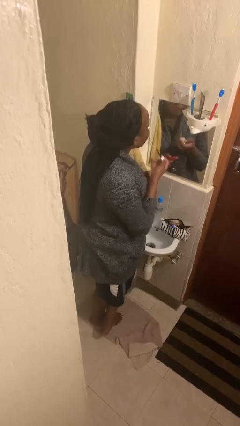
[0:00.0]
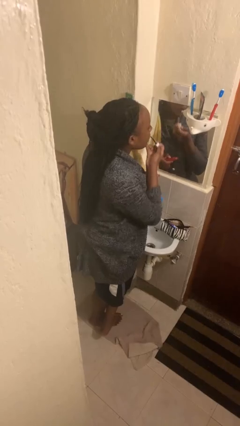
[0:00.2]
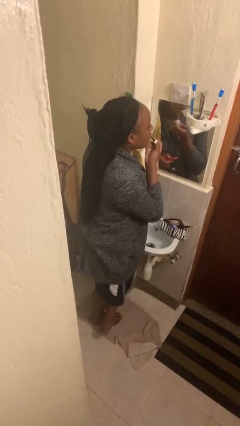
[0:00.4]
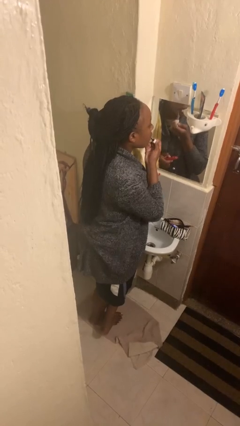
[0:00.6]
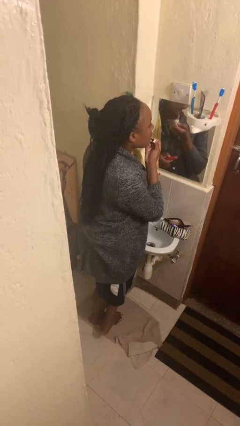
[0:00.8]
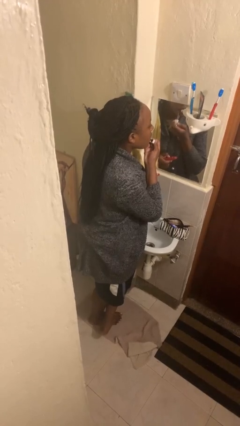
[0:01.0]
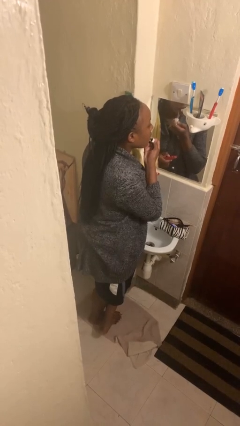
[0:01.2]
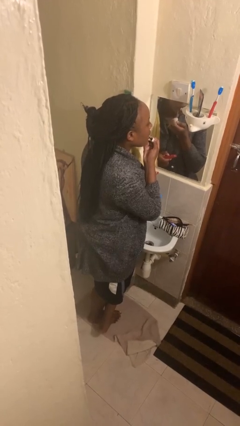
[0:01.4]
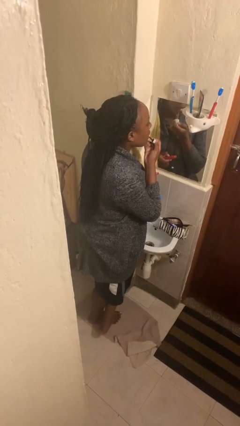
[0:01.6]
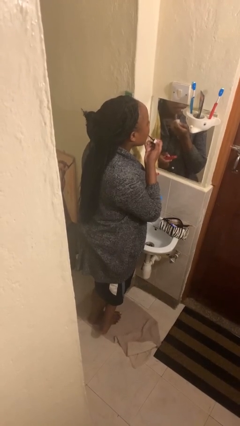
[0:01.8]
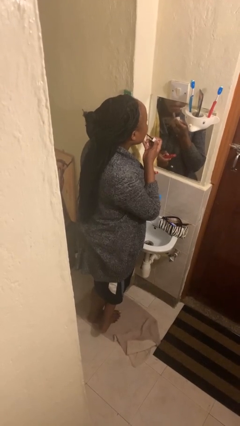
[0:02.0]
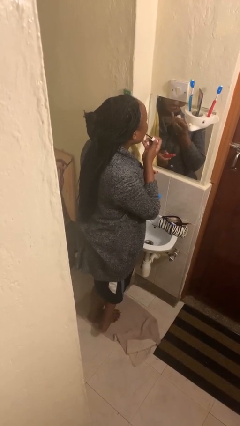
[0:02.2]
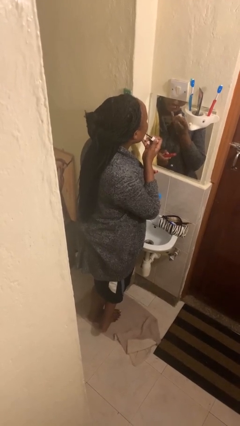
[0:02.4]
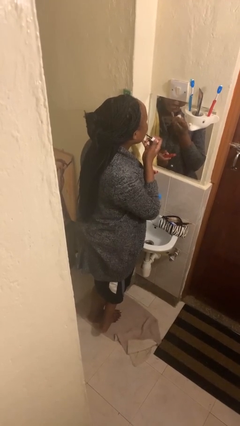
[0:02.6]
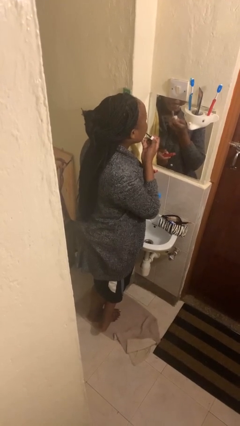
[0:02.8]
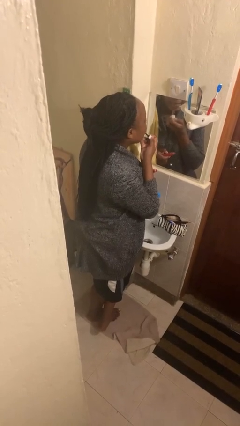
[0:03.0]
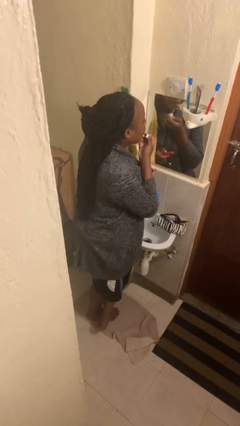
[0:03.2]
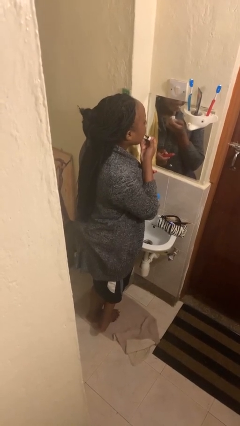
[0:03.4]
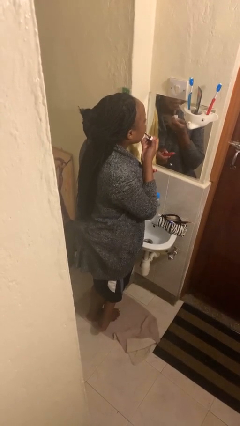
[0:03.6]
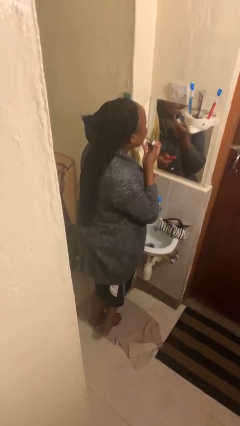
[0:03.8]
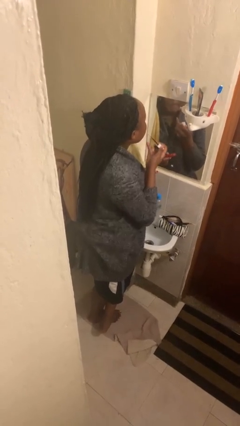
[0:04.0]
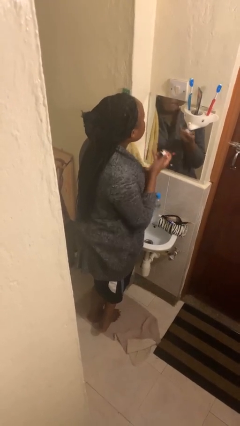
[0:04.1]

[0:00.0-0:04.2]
person applies lip makeup

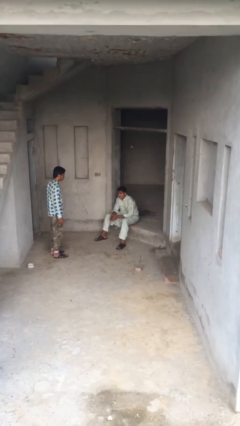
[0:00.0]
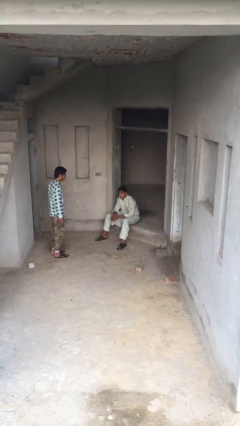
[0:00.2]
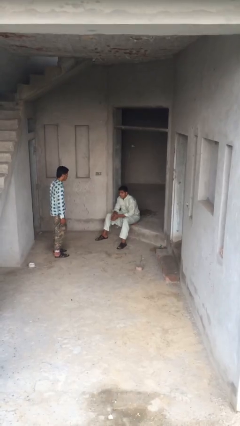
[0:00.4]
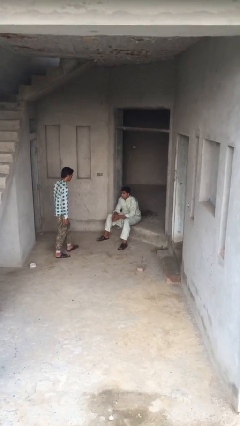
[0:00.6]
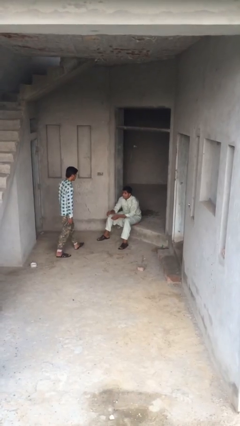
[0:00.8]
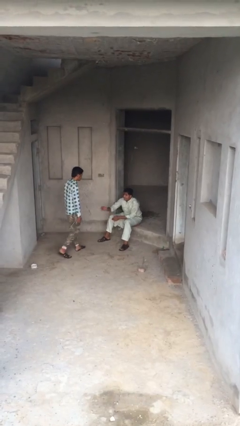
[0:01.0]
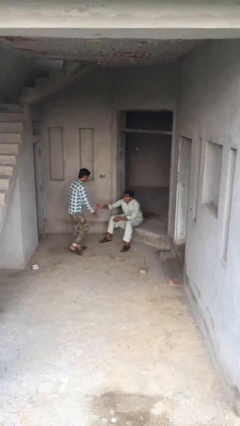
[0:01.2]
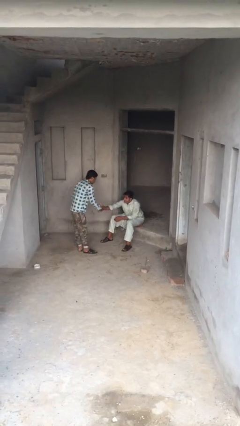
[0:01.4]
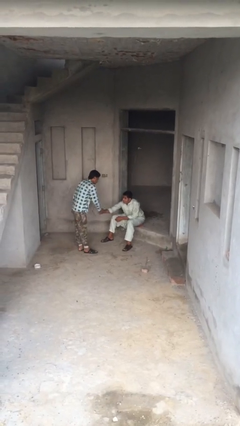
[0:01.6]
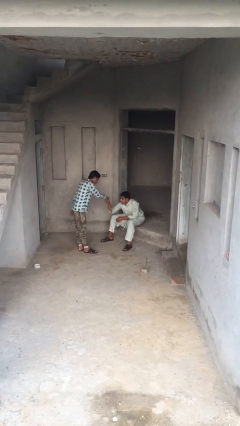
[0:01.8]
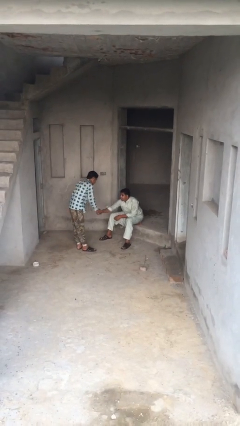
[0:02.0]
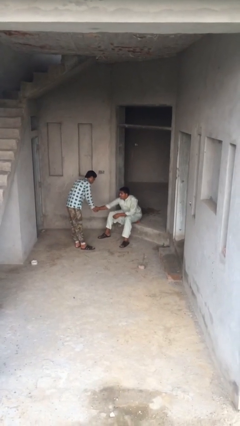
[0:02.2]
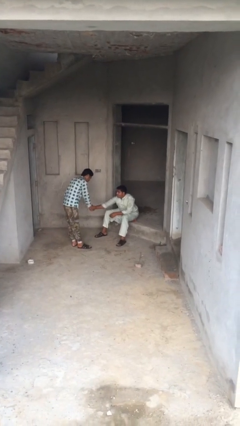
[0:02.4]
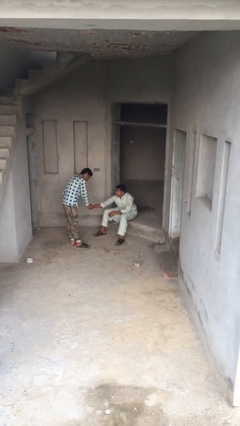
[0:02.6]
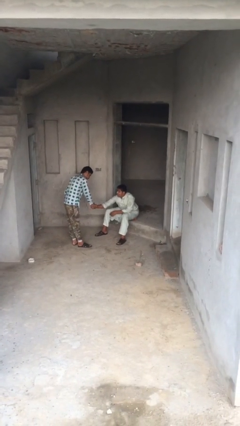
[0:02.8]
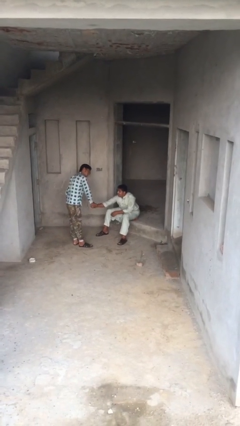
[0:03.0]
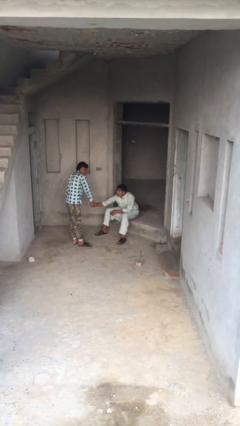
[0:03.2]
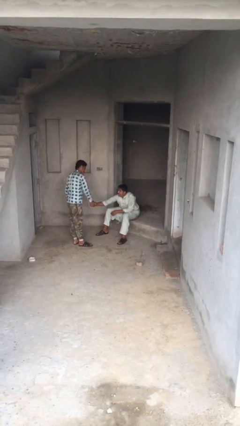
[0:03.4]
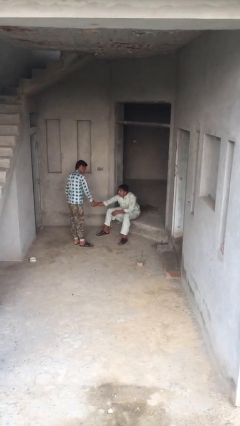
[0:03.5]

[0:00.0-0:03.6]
person shakes hand

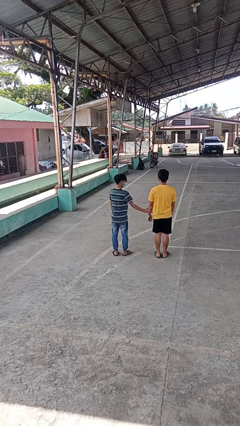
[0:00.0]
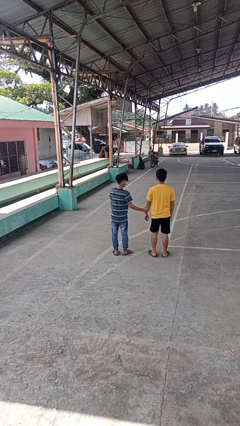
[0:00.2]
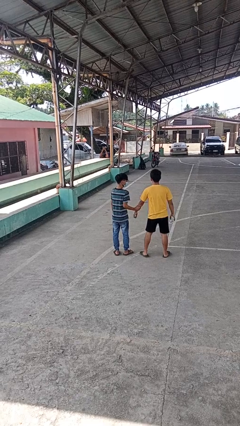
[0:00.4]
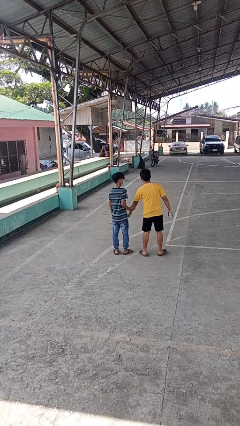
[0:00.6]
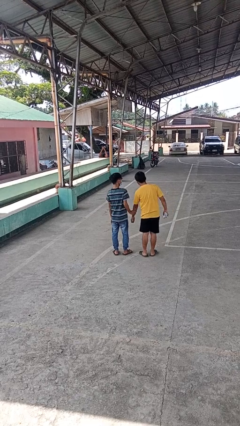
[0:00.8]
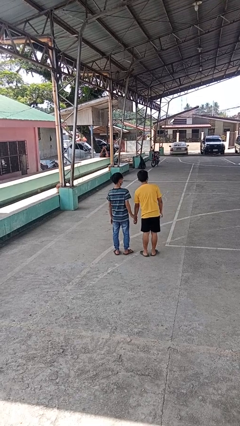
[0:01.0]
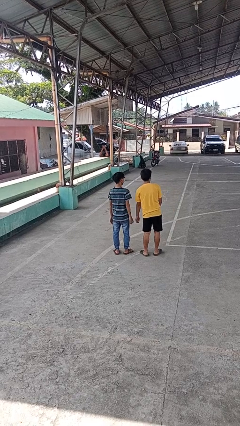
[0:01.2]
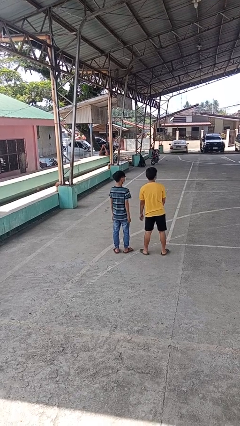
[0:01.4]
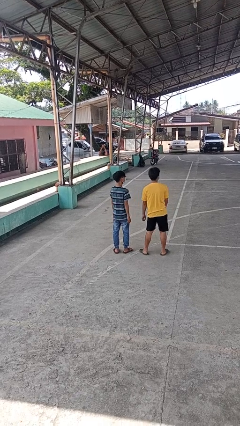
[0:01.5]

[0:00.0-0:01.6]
person grabs person by forearm

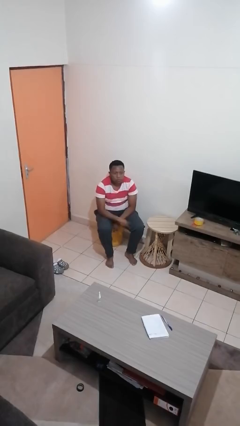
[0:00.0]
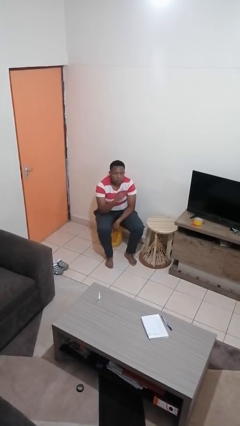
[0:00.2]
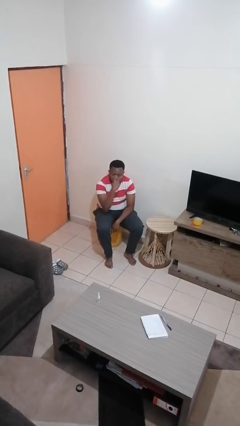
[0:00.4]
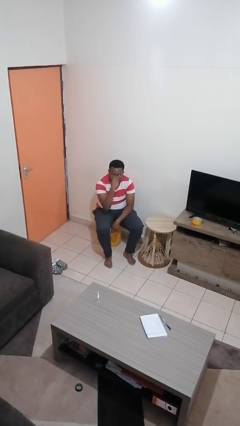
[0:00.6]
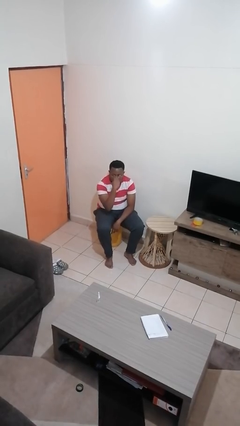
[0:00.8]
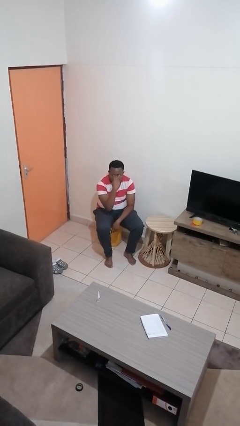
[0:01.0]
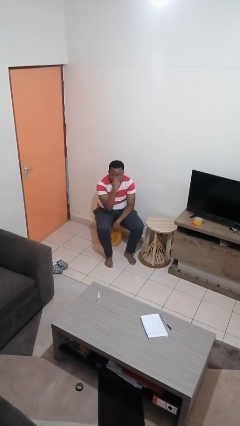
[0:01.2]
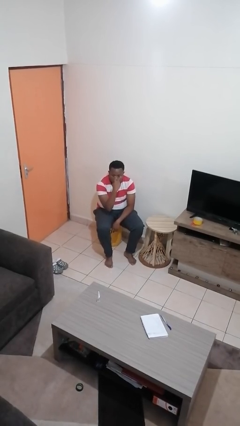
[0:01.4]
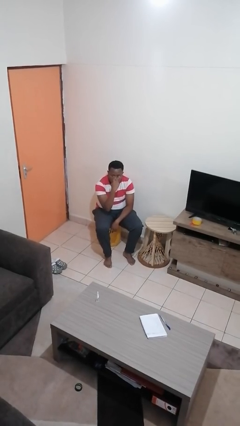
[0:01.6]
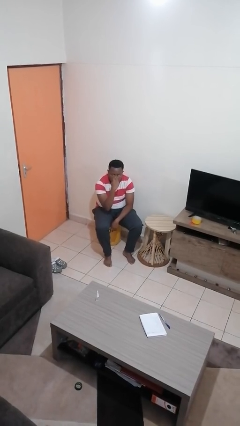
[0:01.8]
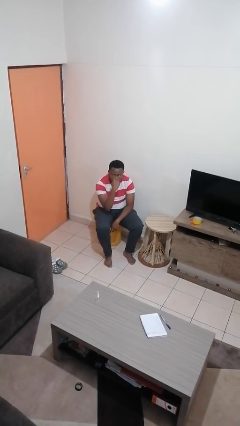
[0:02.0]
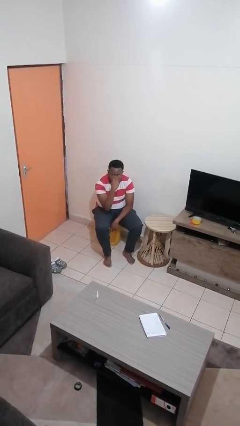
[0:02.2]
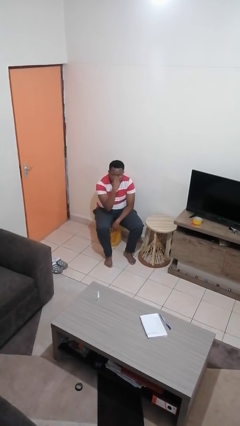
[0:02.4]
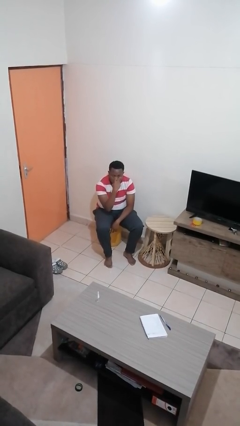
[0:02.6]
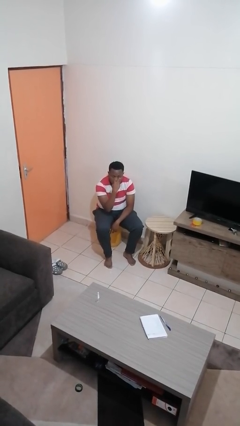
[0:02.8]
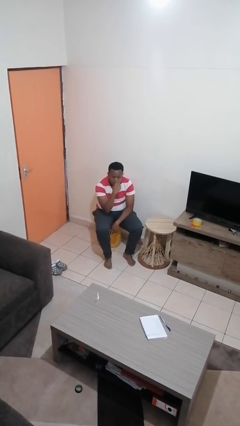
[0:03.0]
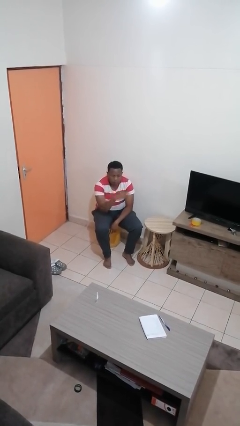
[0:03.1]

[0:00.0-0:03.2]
person gestures watch closely

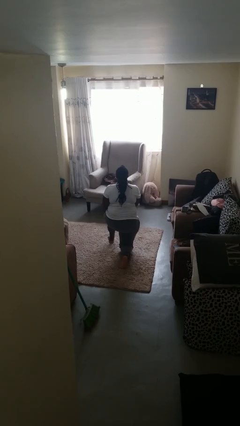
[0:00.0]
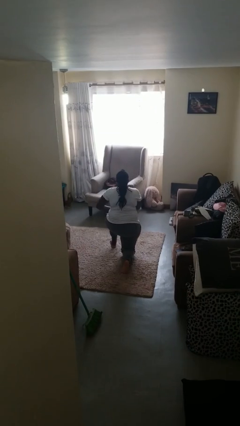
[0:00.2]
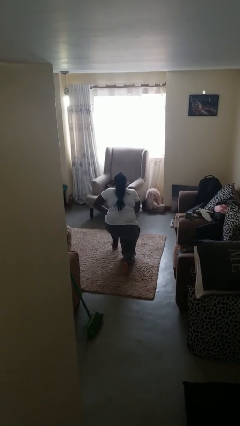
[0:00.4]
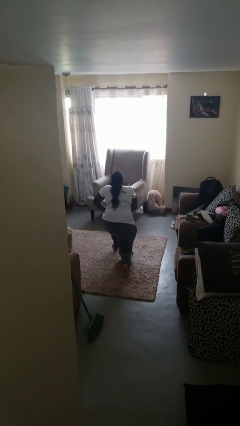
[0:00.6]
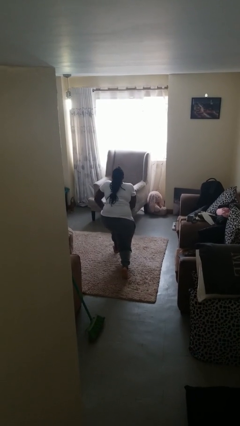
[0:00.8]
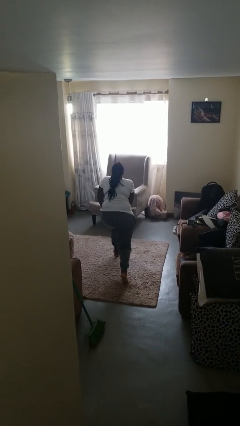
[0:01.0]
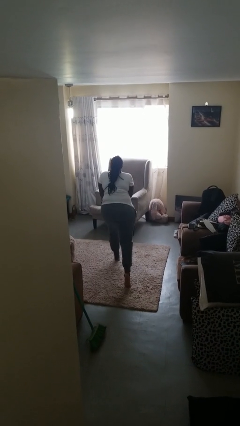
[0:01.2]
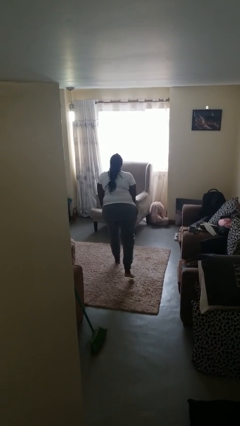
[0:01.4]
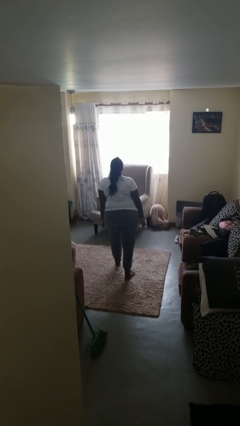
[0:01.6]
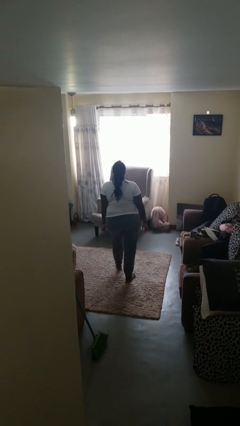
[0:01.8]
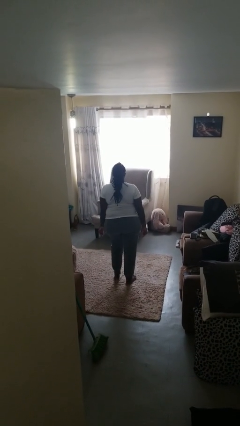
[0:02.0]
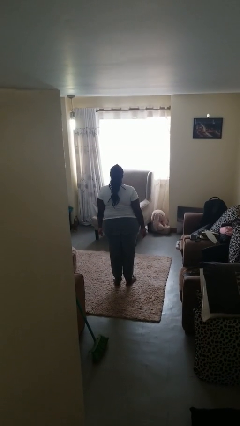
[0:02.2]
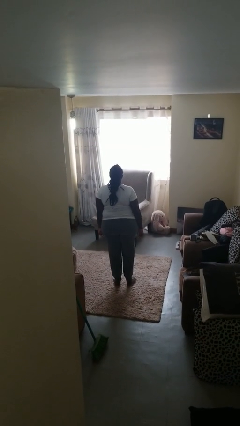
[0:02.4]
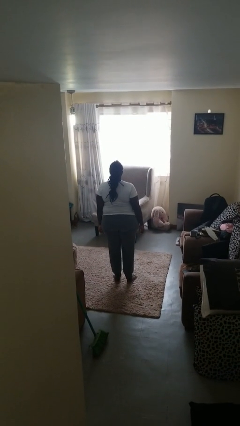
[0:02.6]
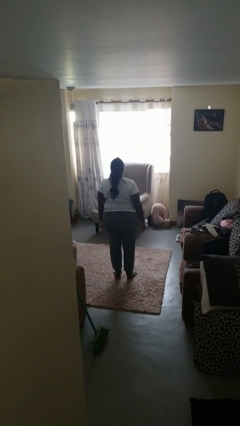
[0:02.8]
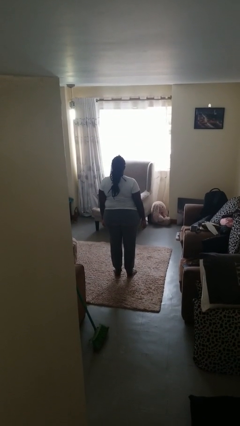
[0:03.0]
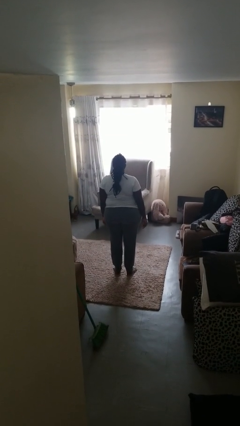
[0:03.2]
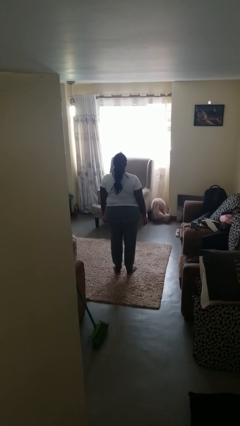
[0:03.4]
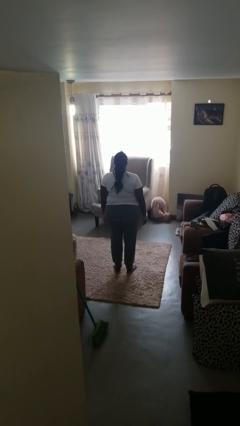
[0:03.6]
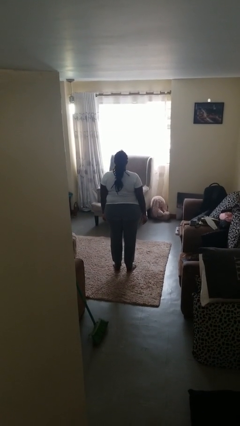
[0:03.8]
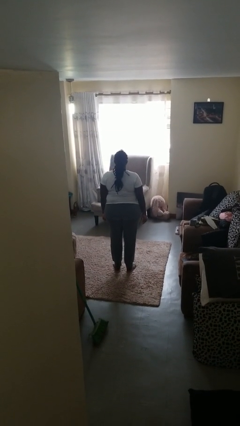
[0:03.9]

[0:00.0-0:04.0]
person stands up from floor

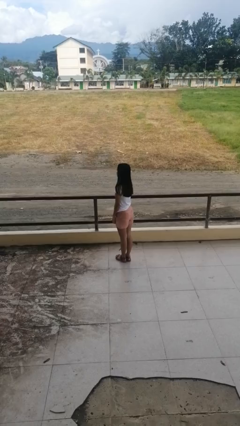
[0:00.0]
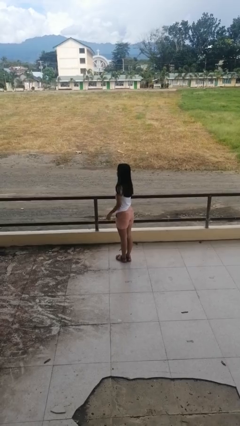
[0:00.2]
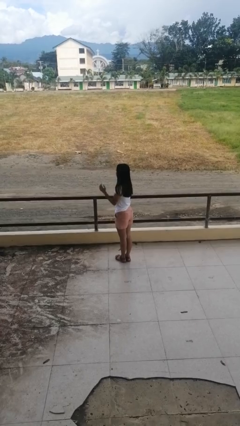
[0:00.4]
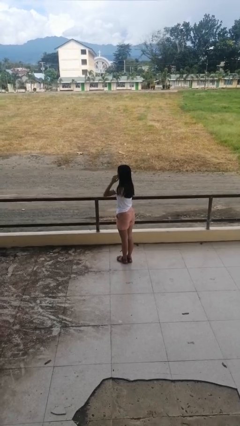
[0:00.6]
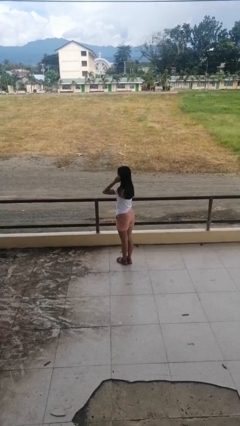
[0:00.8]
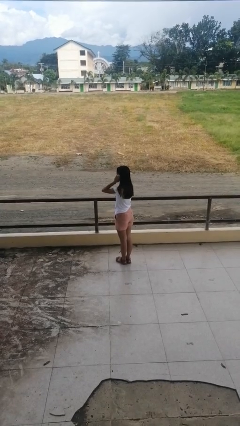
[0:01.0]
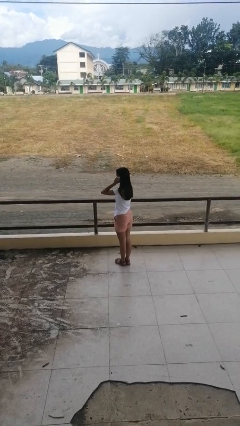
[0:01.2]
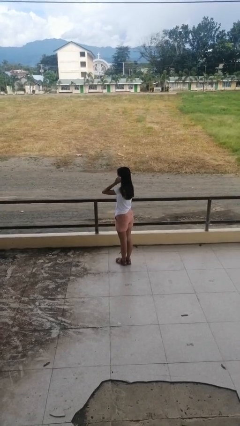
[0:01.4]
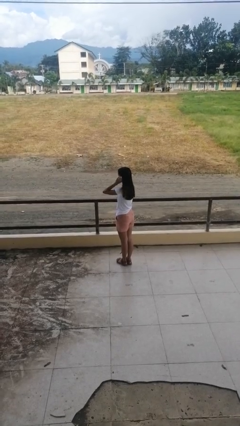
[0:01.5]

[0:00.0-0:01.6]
person touches earlobe
